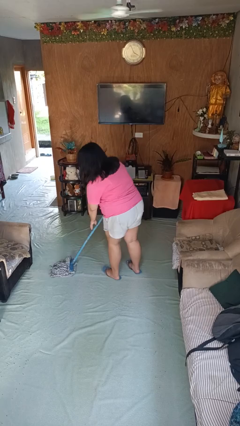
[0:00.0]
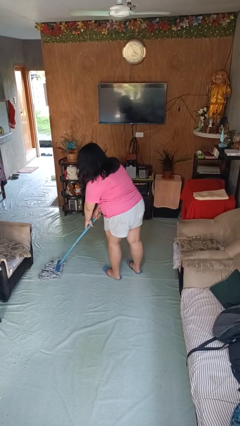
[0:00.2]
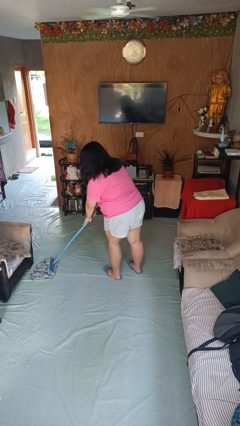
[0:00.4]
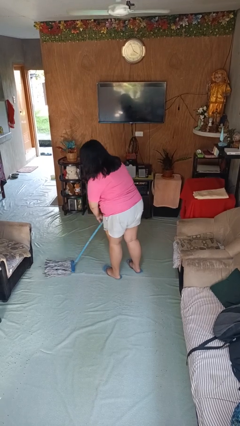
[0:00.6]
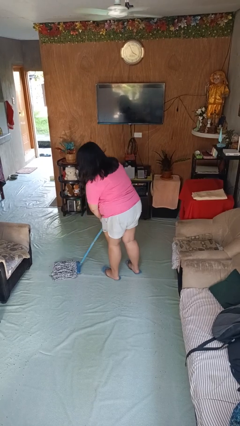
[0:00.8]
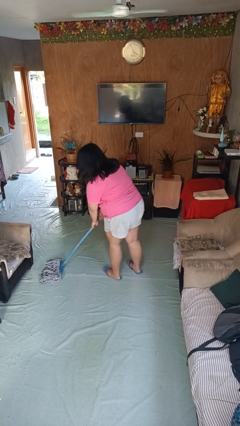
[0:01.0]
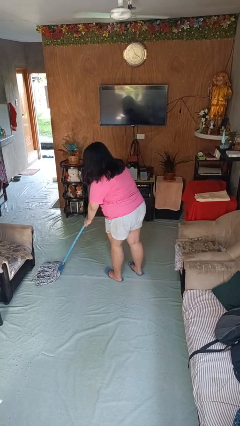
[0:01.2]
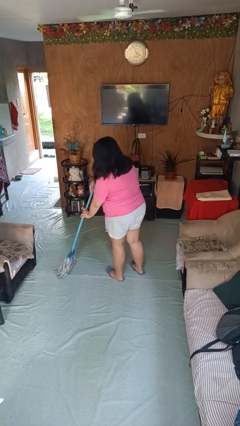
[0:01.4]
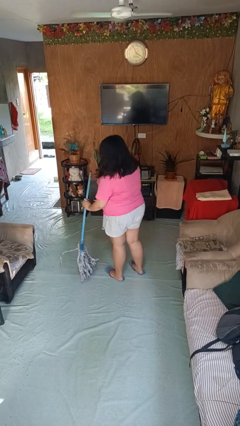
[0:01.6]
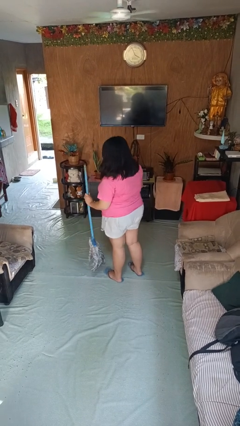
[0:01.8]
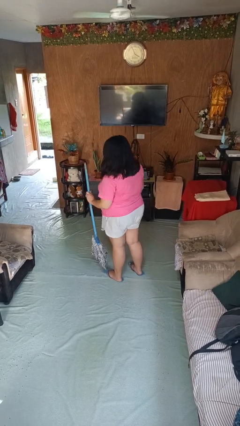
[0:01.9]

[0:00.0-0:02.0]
person mops

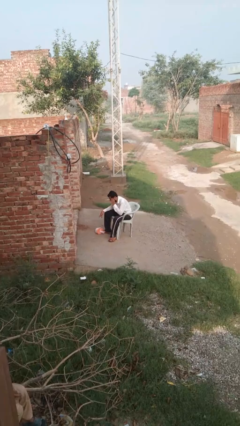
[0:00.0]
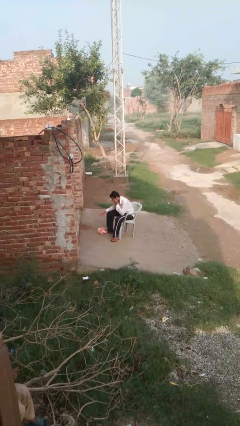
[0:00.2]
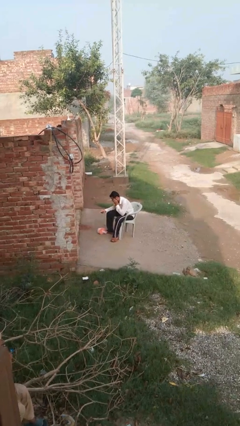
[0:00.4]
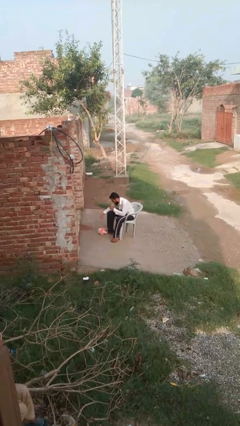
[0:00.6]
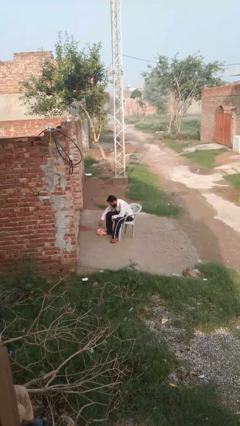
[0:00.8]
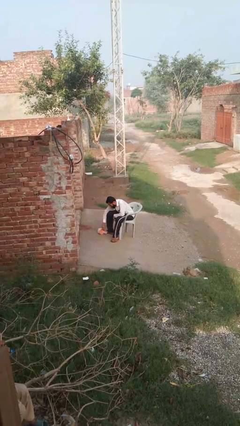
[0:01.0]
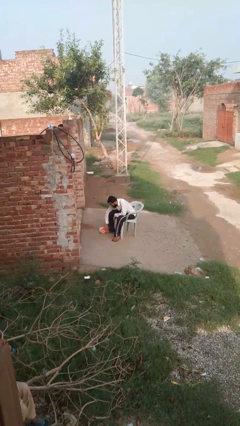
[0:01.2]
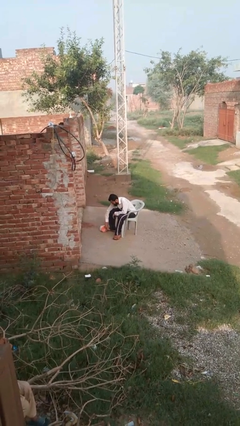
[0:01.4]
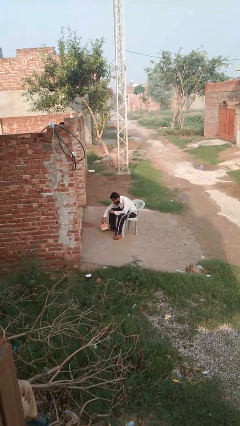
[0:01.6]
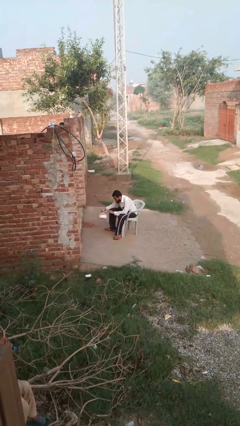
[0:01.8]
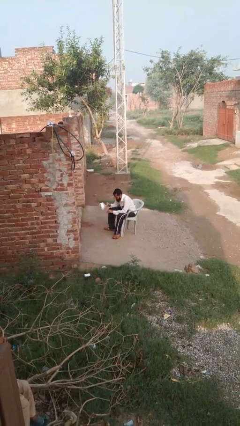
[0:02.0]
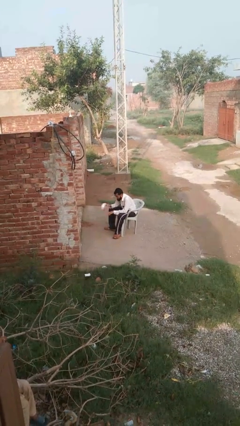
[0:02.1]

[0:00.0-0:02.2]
person picks up object from floor

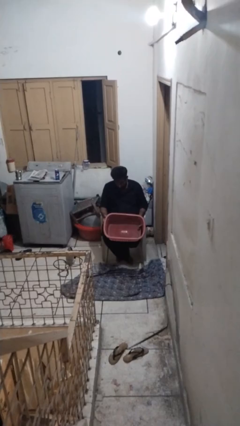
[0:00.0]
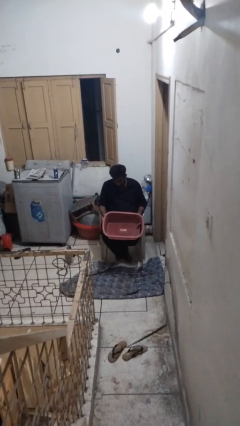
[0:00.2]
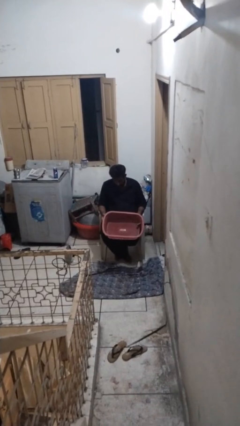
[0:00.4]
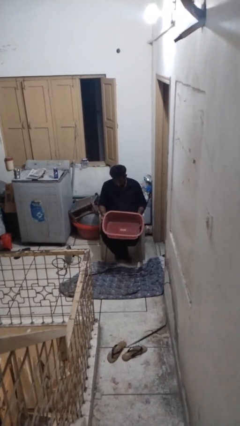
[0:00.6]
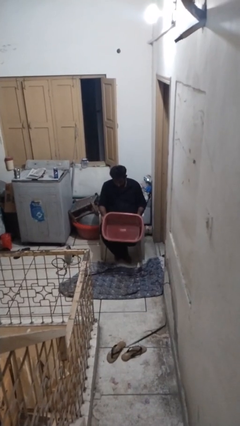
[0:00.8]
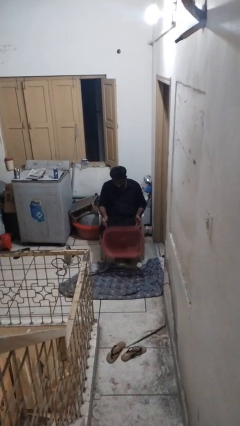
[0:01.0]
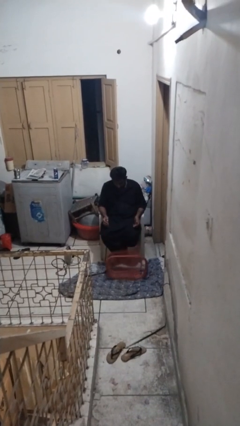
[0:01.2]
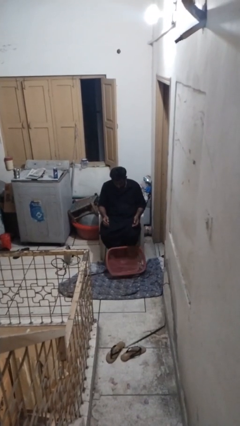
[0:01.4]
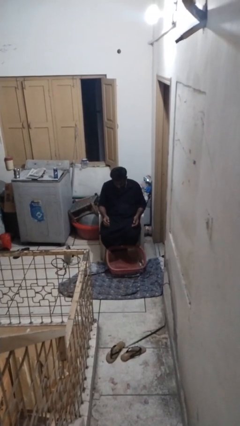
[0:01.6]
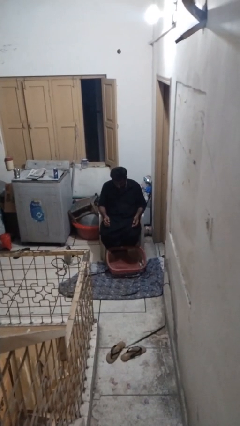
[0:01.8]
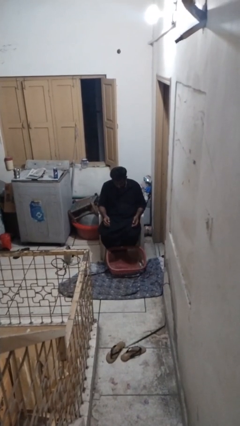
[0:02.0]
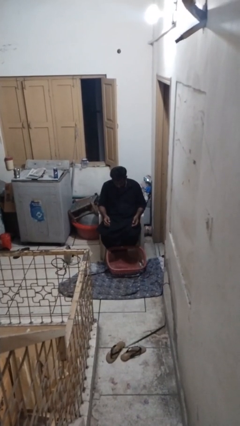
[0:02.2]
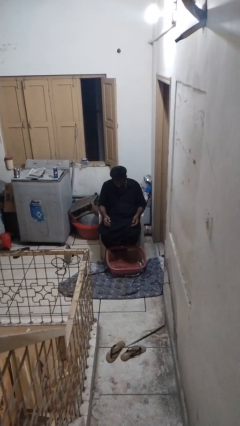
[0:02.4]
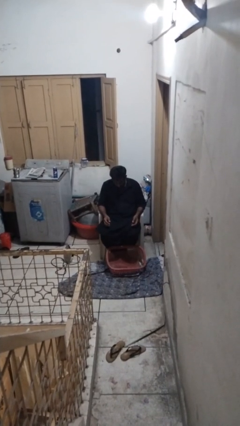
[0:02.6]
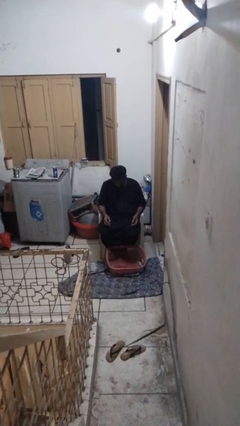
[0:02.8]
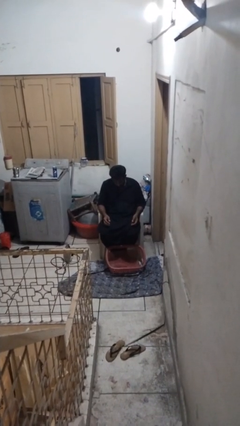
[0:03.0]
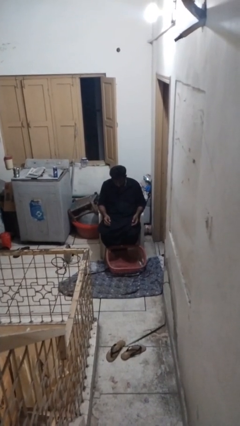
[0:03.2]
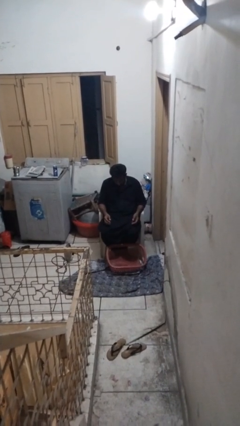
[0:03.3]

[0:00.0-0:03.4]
person drops object

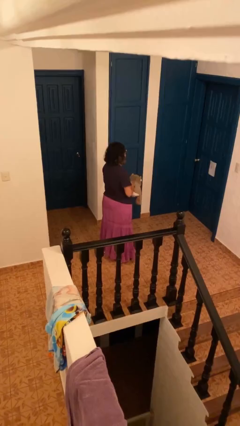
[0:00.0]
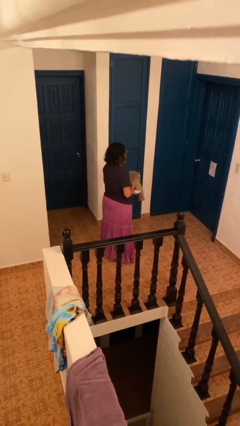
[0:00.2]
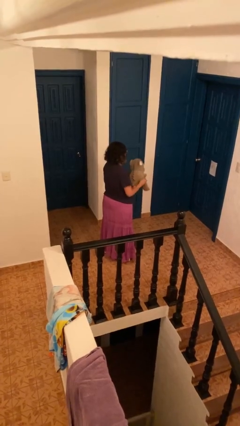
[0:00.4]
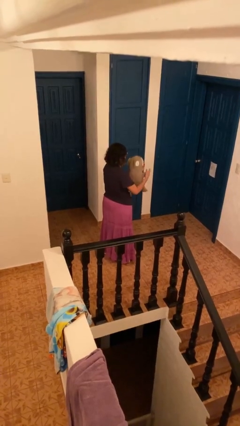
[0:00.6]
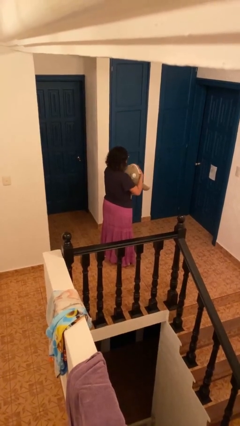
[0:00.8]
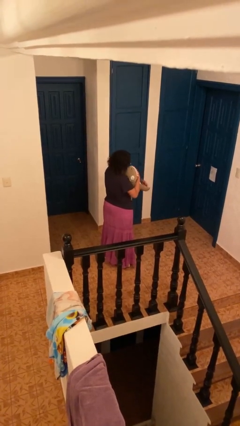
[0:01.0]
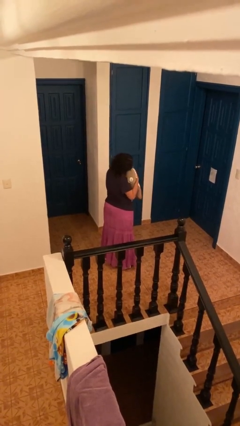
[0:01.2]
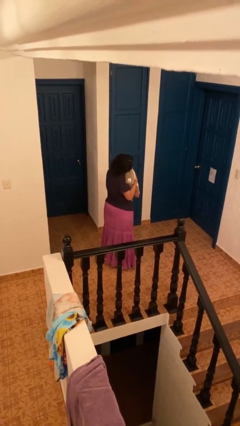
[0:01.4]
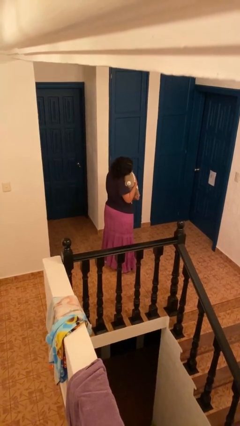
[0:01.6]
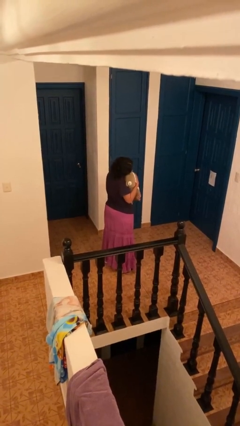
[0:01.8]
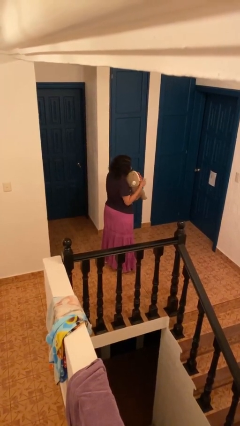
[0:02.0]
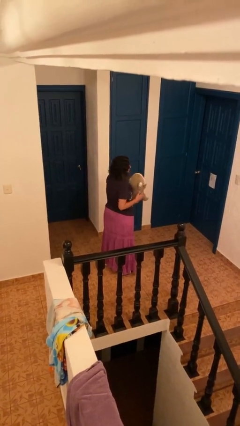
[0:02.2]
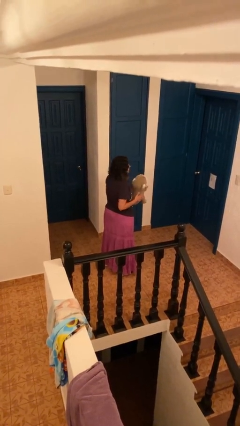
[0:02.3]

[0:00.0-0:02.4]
person hugs stuffed animal

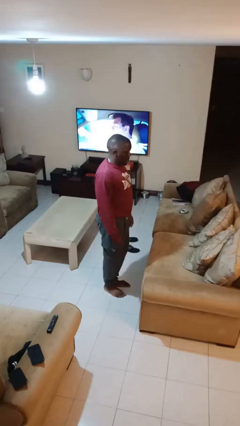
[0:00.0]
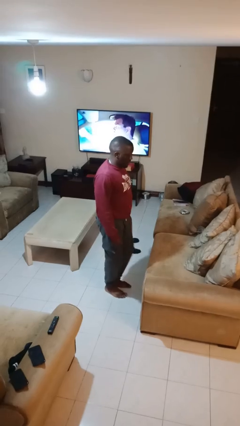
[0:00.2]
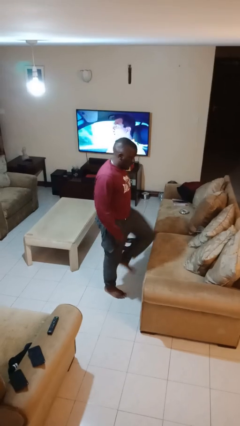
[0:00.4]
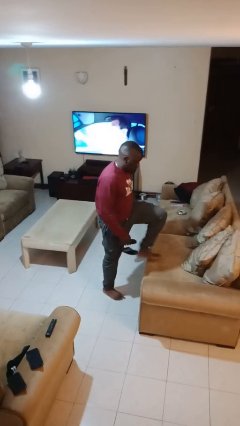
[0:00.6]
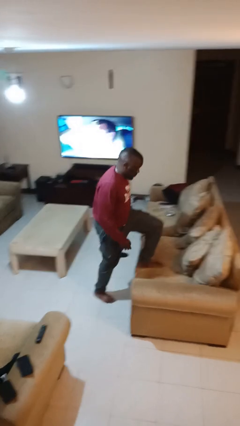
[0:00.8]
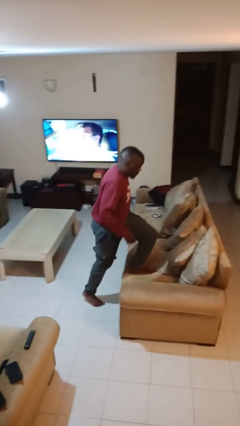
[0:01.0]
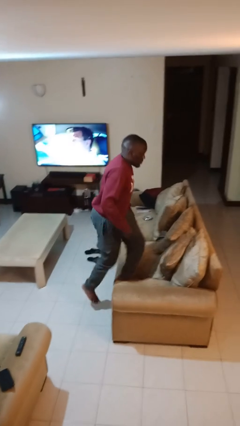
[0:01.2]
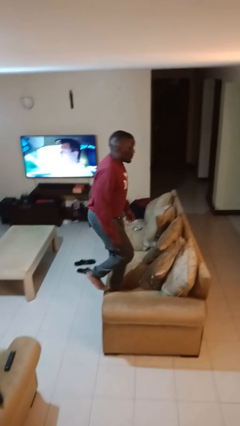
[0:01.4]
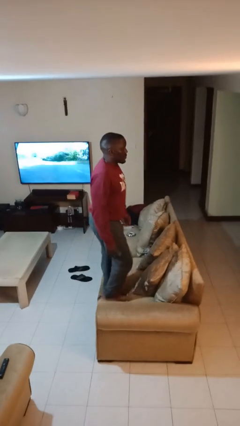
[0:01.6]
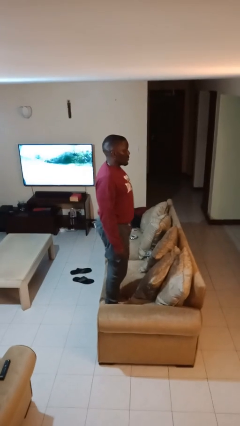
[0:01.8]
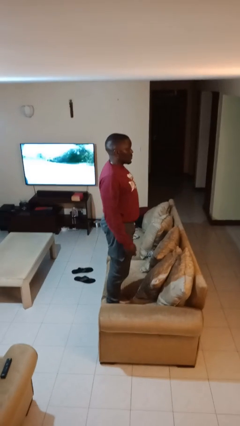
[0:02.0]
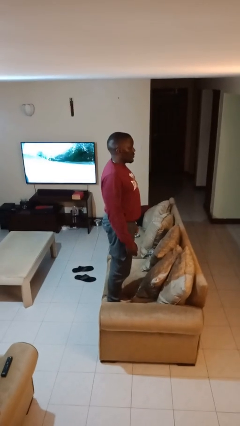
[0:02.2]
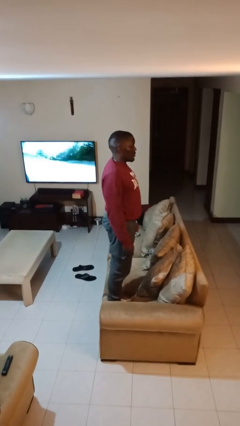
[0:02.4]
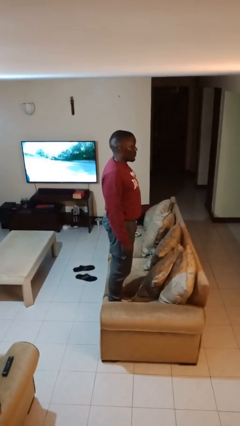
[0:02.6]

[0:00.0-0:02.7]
person climbs on couch

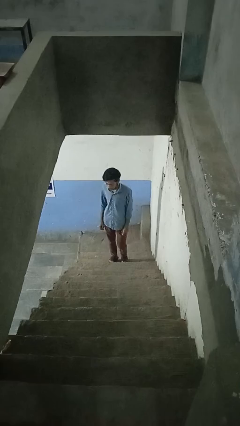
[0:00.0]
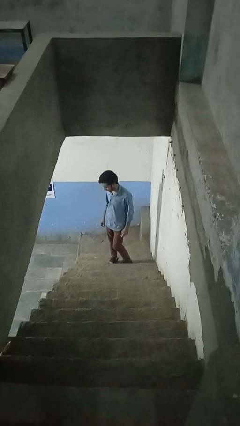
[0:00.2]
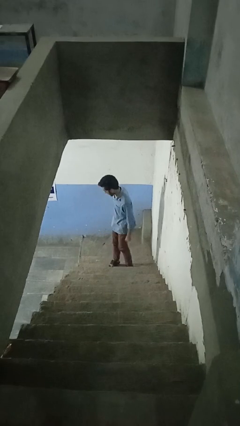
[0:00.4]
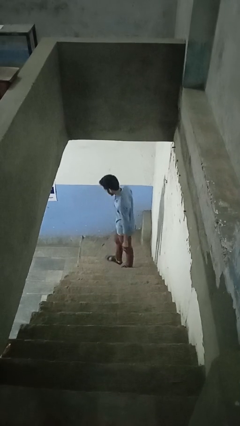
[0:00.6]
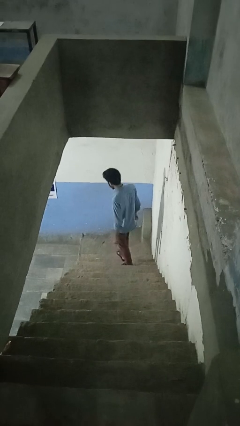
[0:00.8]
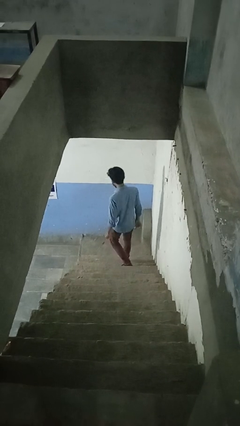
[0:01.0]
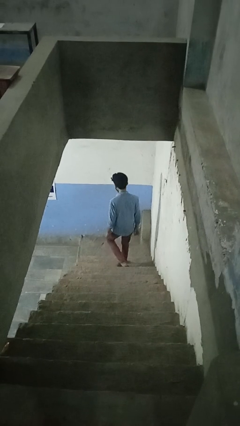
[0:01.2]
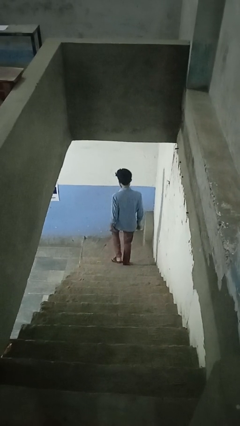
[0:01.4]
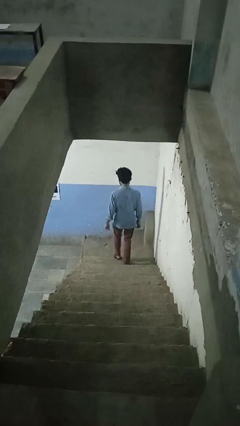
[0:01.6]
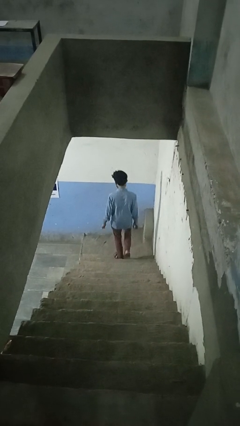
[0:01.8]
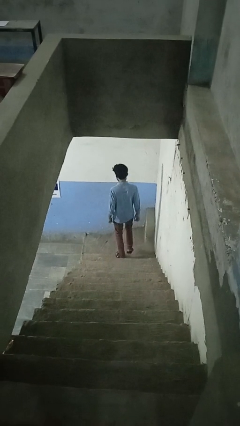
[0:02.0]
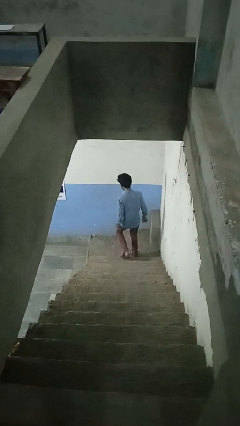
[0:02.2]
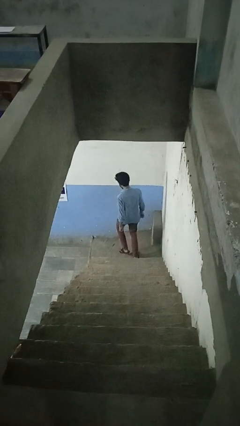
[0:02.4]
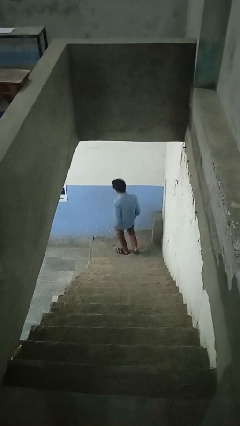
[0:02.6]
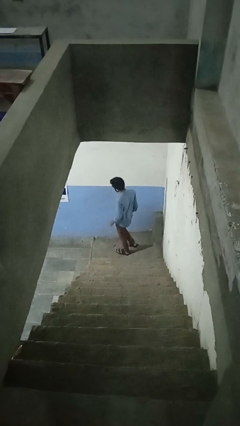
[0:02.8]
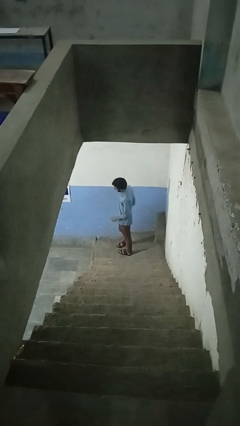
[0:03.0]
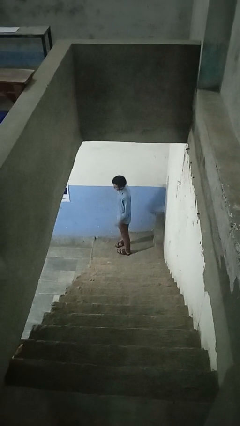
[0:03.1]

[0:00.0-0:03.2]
person climbs down stairs

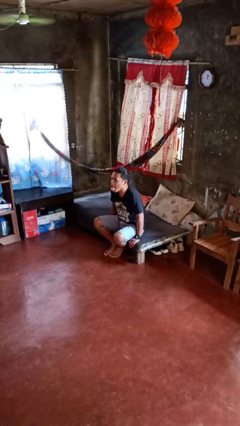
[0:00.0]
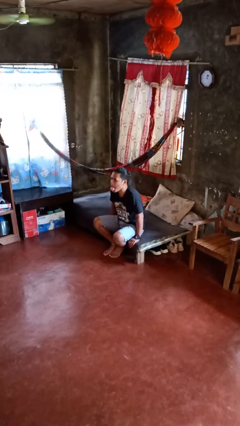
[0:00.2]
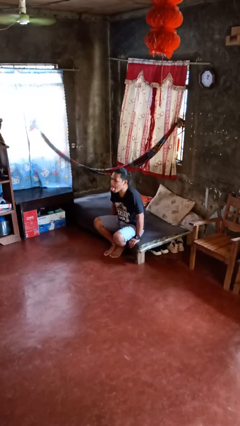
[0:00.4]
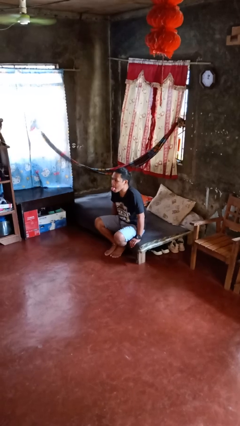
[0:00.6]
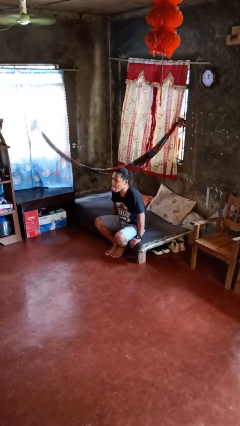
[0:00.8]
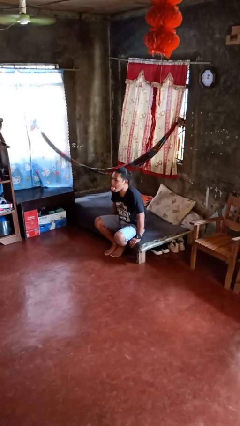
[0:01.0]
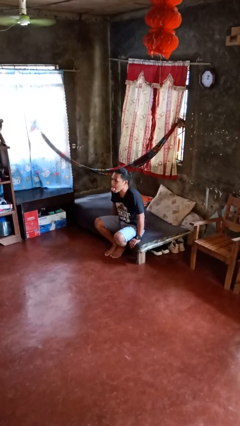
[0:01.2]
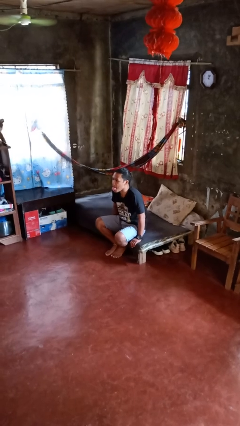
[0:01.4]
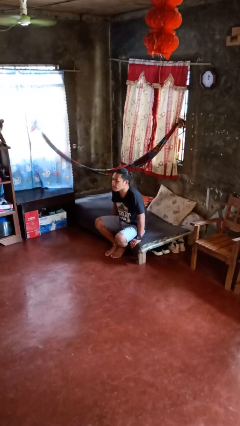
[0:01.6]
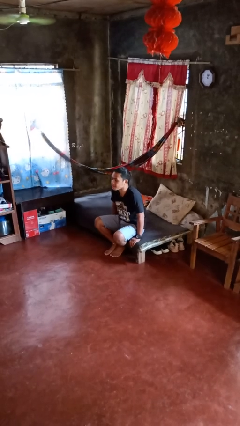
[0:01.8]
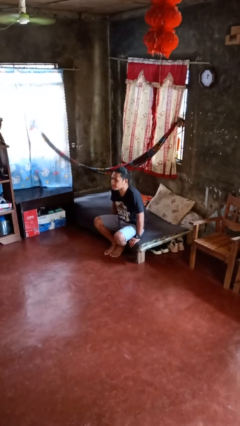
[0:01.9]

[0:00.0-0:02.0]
person sticks out tongue
